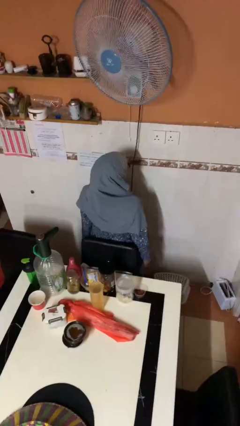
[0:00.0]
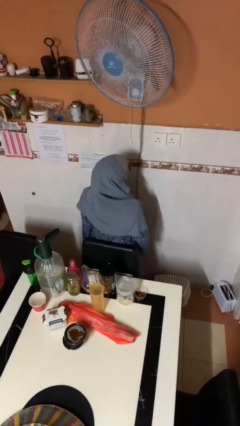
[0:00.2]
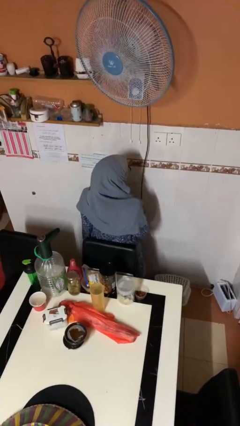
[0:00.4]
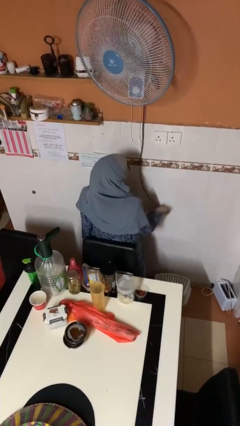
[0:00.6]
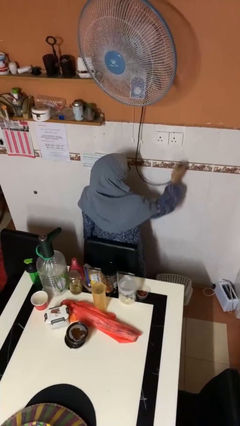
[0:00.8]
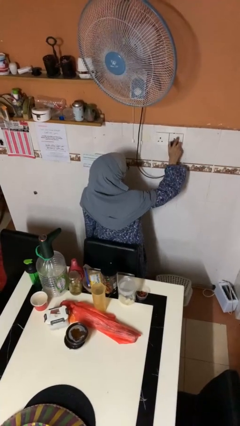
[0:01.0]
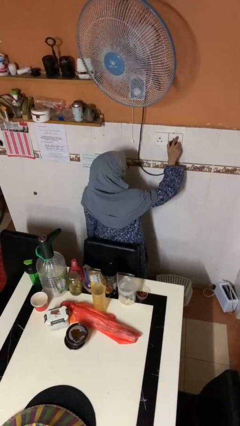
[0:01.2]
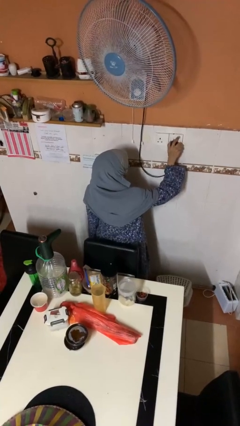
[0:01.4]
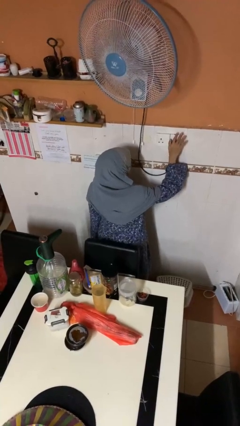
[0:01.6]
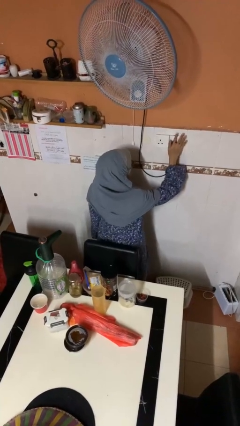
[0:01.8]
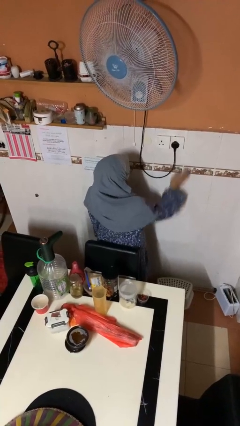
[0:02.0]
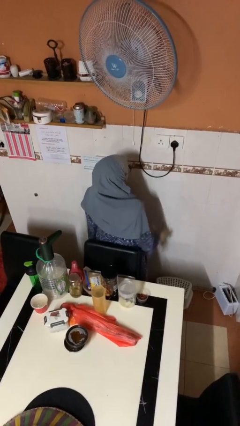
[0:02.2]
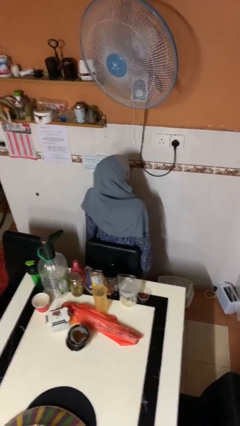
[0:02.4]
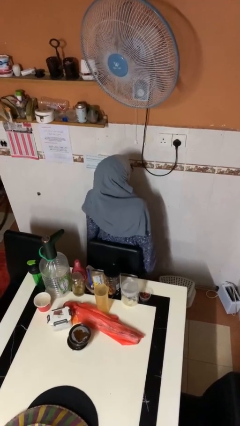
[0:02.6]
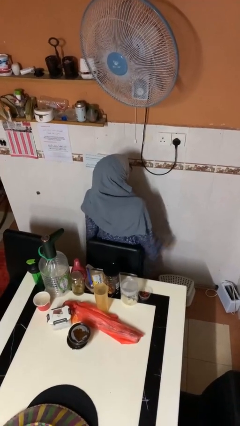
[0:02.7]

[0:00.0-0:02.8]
person plugs into electrical socket

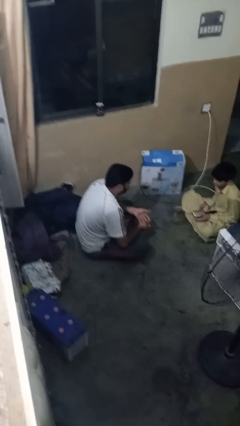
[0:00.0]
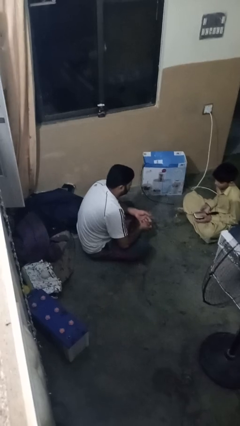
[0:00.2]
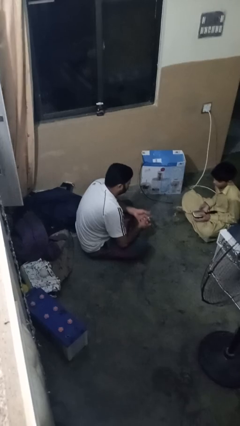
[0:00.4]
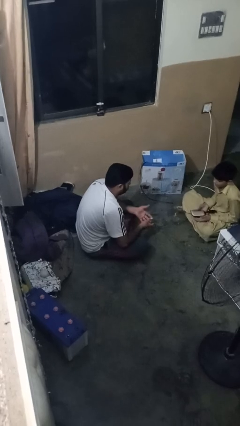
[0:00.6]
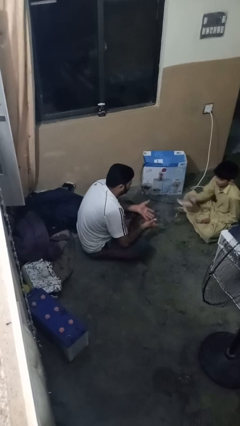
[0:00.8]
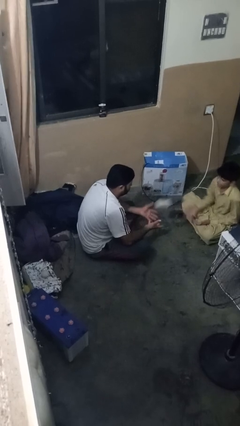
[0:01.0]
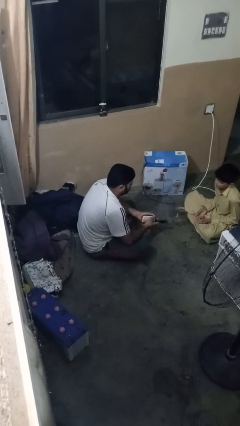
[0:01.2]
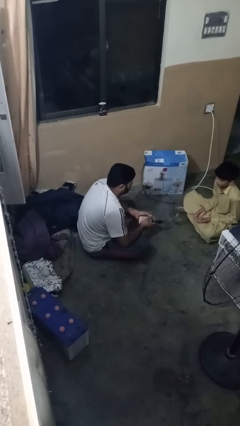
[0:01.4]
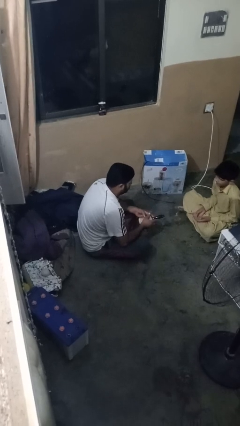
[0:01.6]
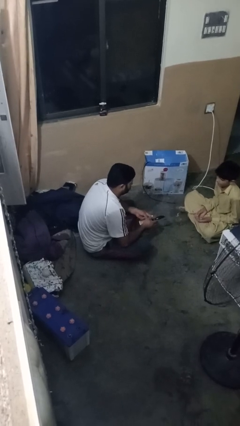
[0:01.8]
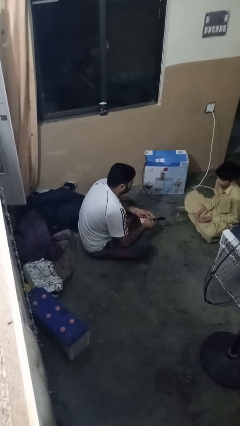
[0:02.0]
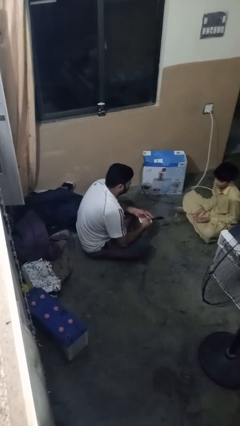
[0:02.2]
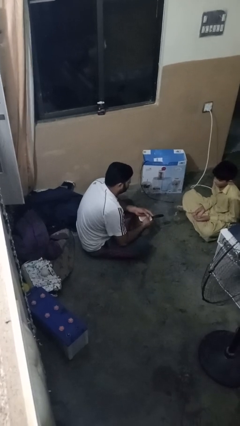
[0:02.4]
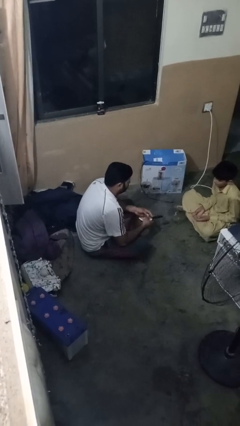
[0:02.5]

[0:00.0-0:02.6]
person catches object from person

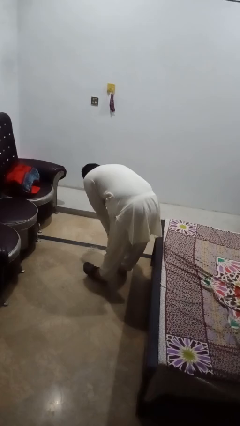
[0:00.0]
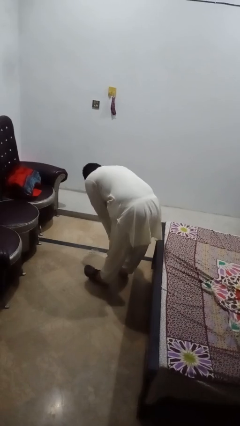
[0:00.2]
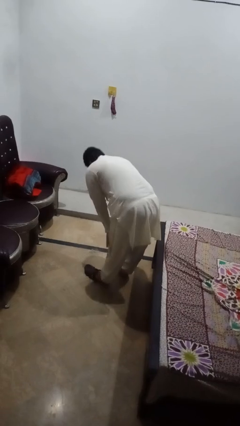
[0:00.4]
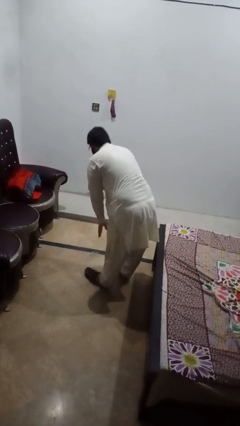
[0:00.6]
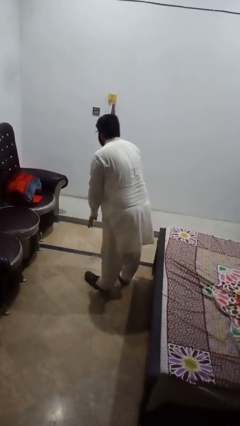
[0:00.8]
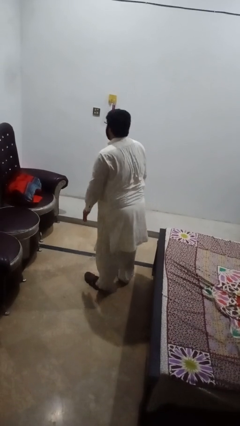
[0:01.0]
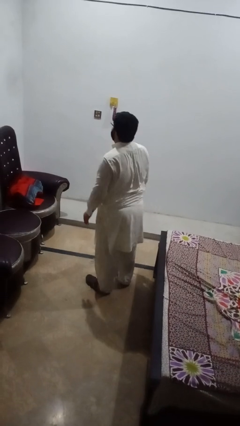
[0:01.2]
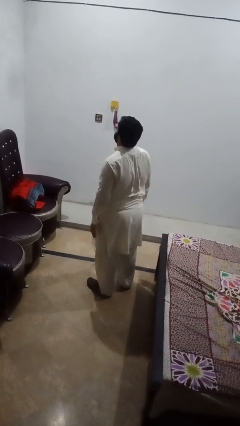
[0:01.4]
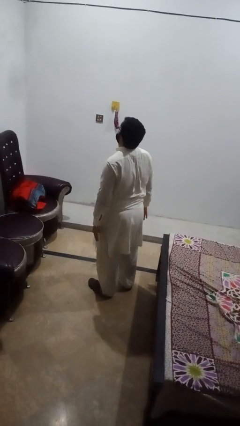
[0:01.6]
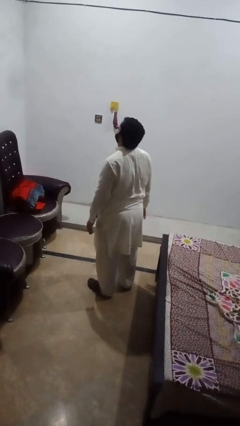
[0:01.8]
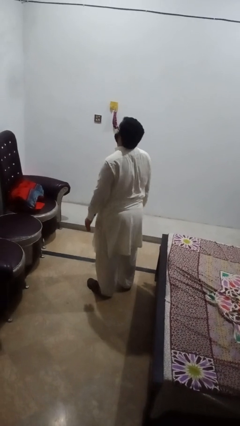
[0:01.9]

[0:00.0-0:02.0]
person stands up

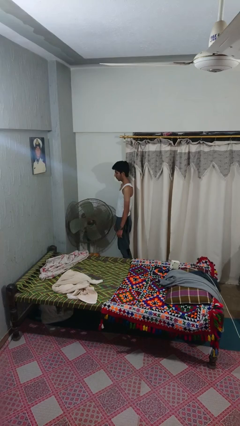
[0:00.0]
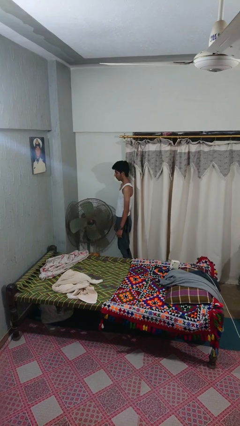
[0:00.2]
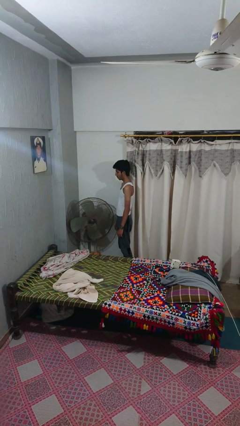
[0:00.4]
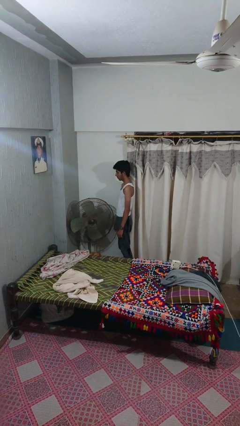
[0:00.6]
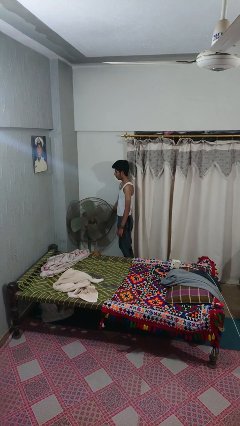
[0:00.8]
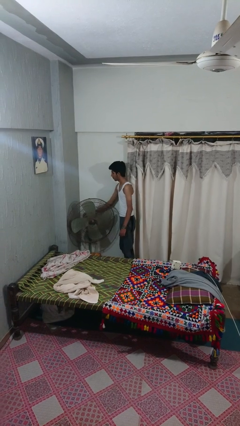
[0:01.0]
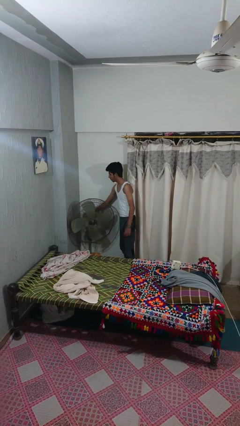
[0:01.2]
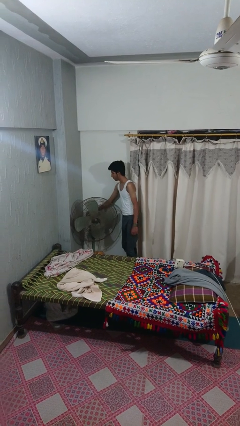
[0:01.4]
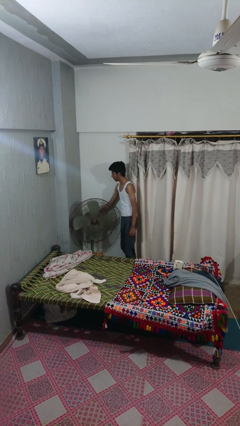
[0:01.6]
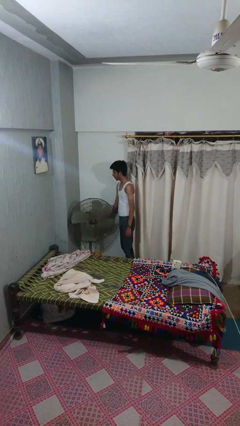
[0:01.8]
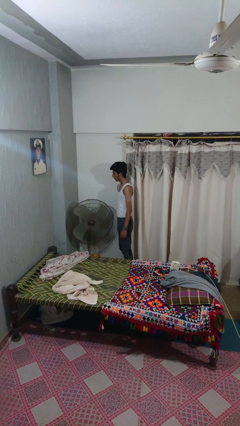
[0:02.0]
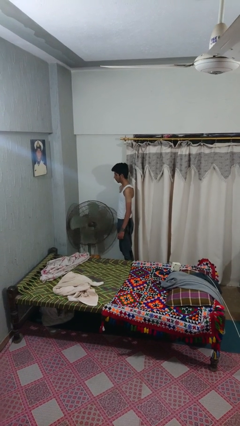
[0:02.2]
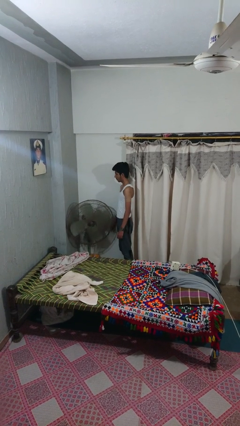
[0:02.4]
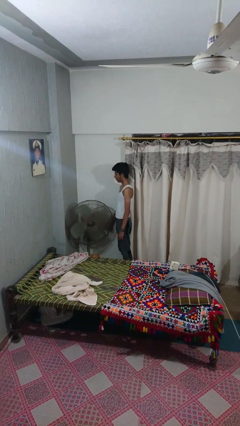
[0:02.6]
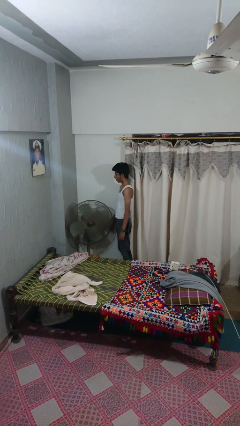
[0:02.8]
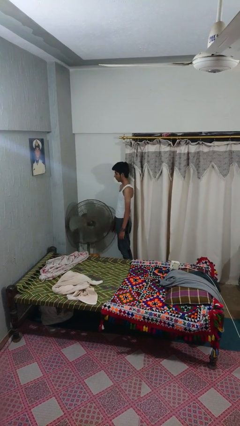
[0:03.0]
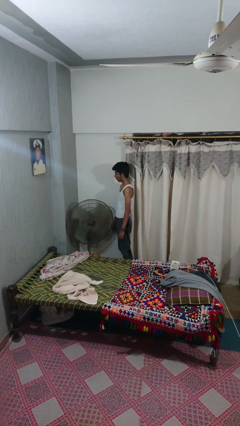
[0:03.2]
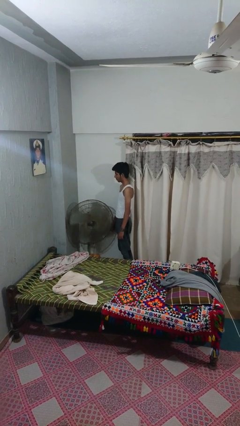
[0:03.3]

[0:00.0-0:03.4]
person turns on fan

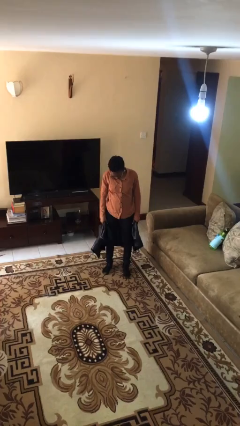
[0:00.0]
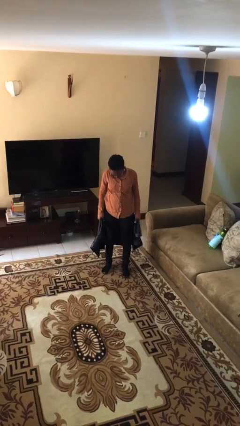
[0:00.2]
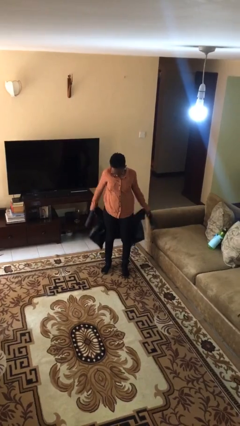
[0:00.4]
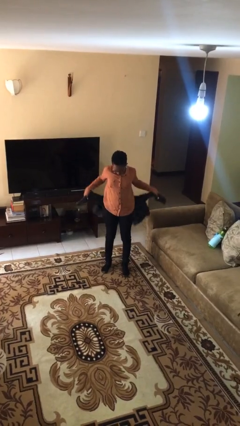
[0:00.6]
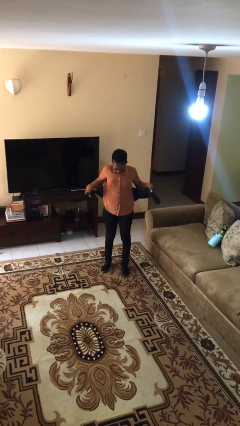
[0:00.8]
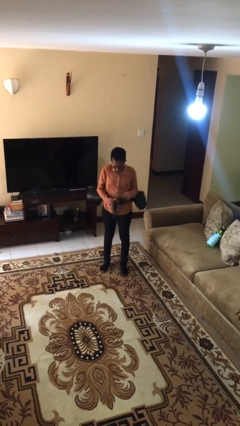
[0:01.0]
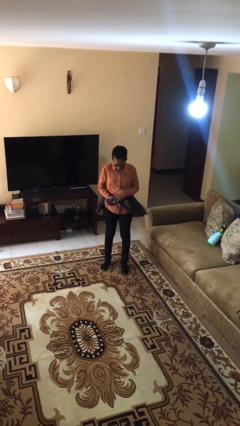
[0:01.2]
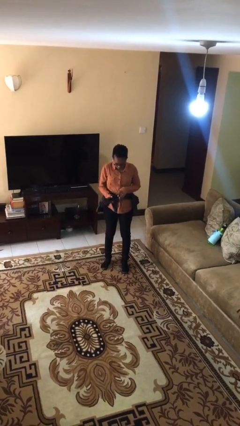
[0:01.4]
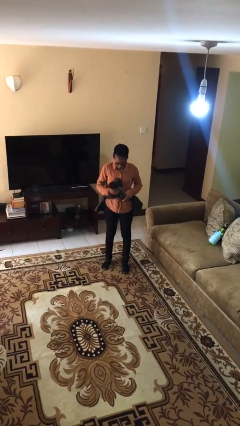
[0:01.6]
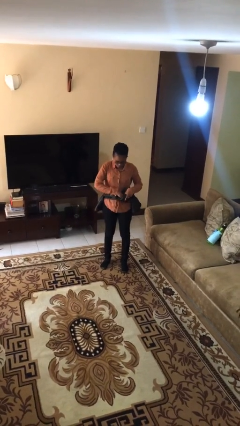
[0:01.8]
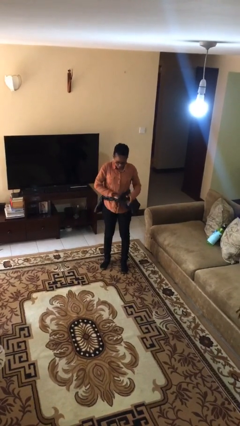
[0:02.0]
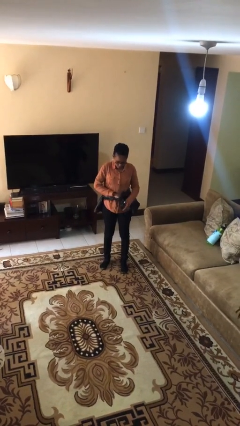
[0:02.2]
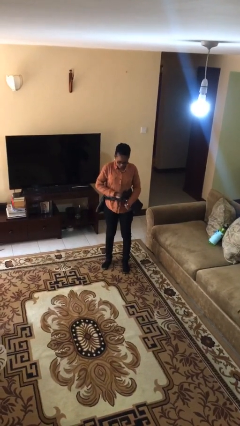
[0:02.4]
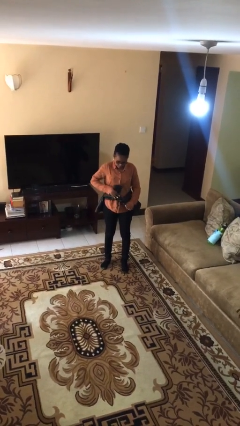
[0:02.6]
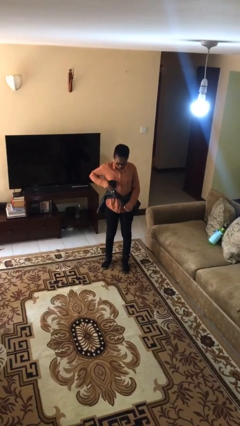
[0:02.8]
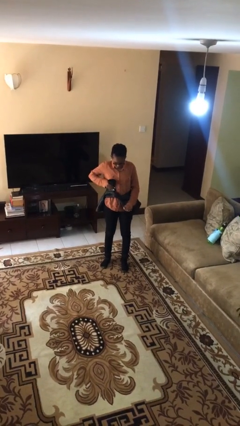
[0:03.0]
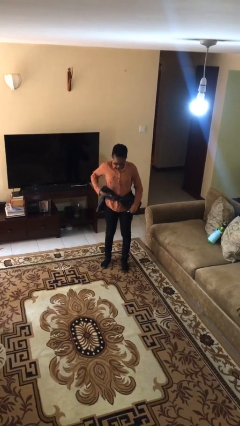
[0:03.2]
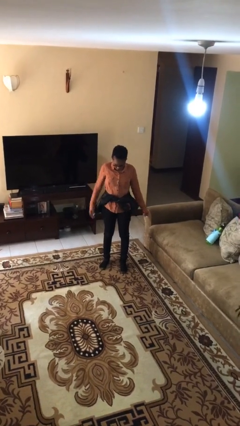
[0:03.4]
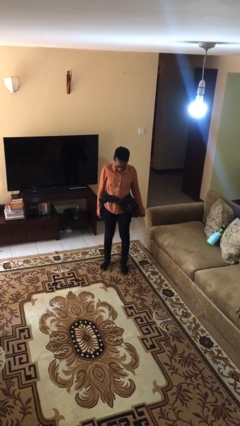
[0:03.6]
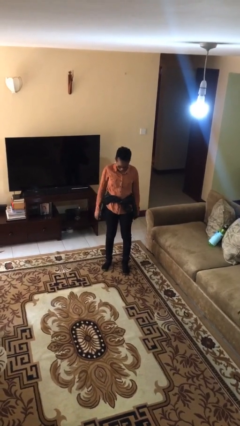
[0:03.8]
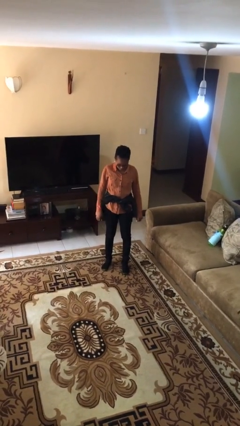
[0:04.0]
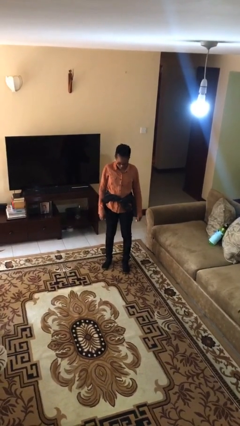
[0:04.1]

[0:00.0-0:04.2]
person ties jacket around waist

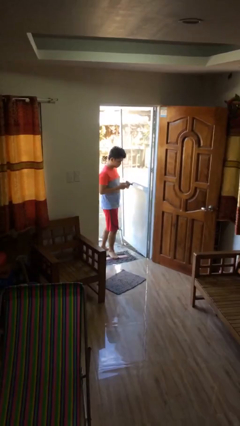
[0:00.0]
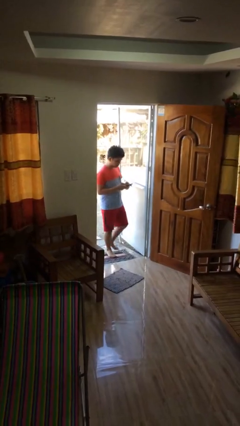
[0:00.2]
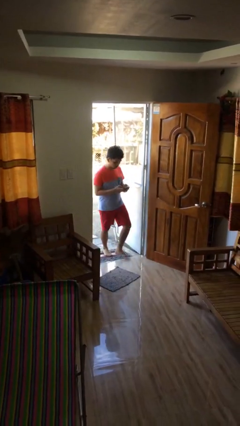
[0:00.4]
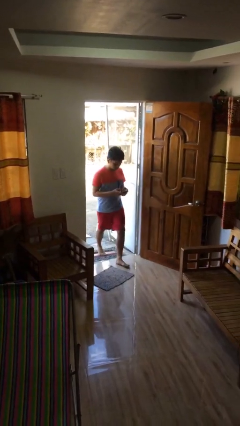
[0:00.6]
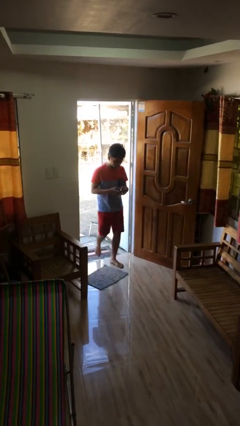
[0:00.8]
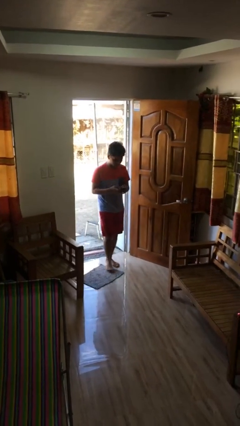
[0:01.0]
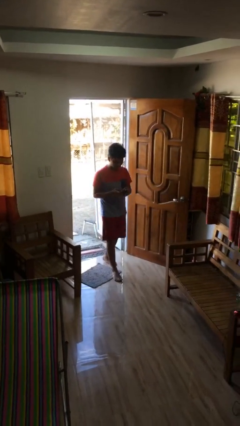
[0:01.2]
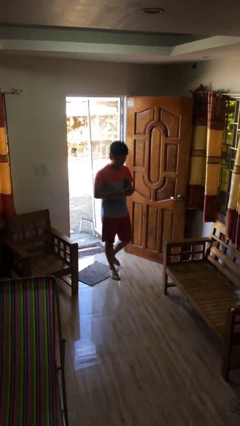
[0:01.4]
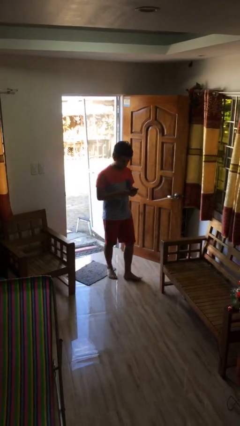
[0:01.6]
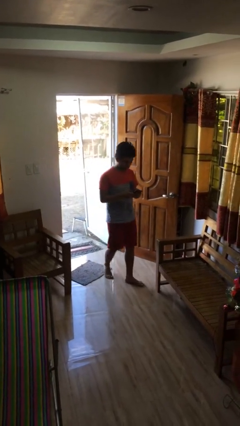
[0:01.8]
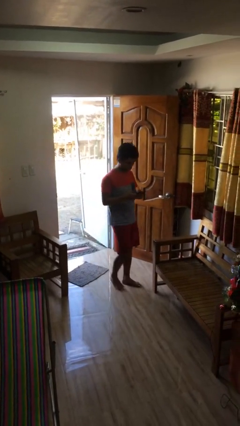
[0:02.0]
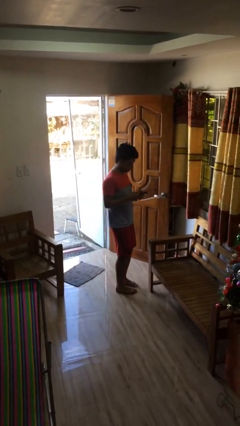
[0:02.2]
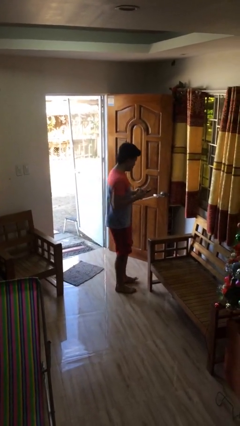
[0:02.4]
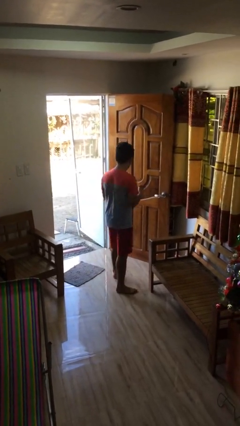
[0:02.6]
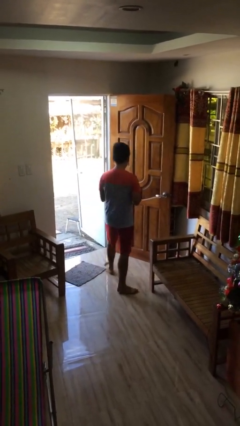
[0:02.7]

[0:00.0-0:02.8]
person enters scene through structure
